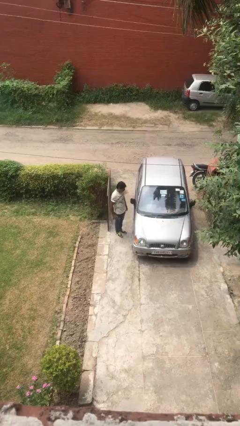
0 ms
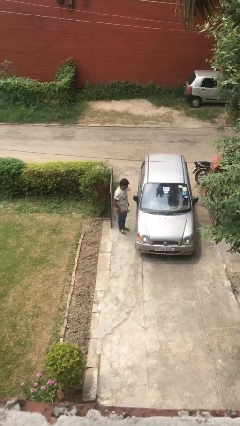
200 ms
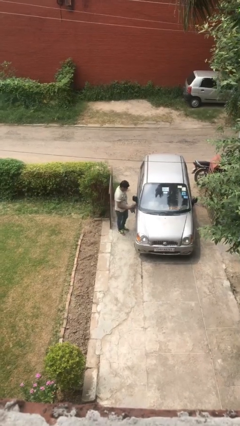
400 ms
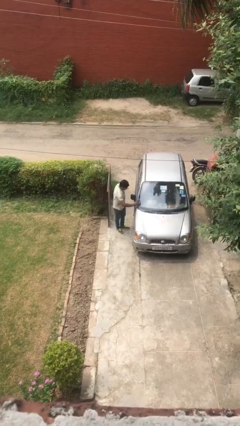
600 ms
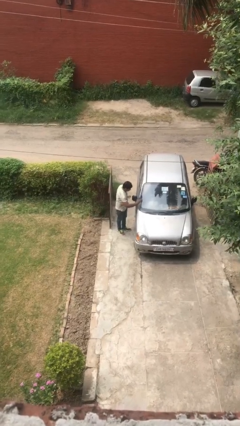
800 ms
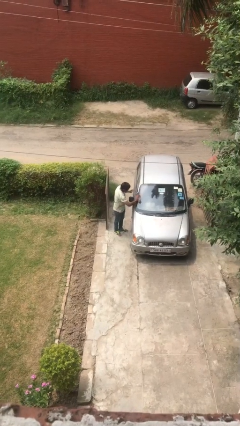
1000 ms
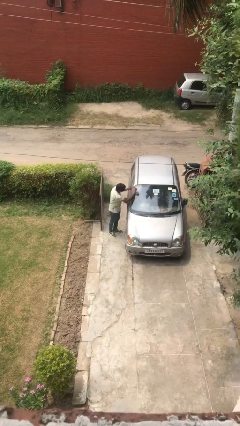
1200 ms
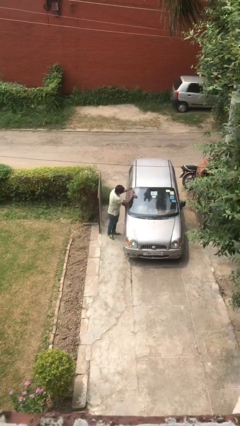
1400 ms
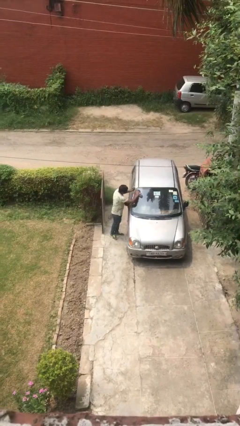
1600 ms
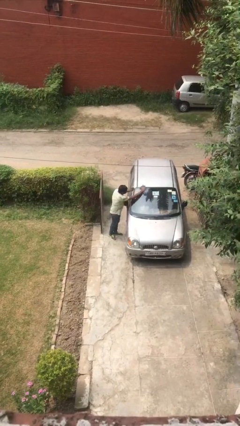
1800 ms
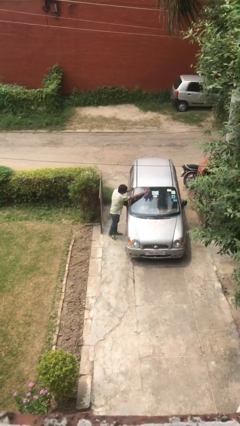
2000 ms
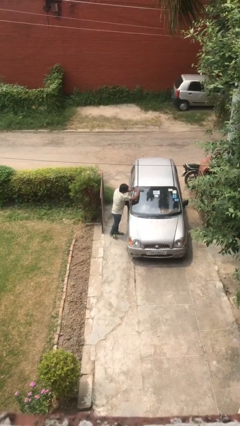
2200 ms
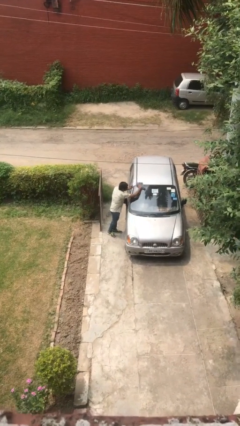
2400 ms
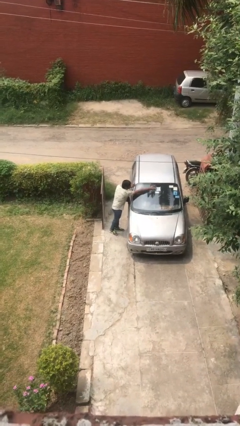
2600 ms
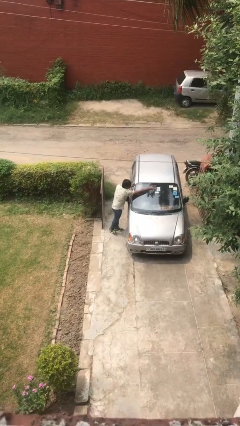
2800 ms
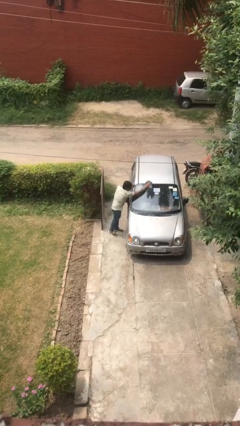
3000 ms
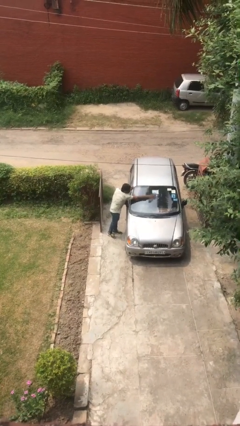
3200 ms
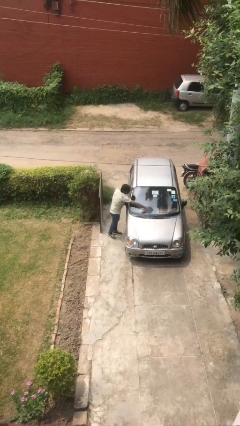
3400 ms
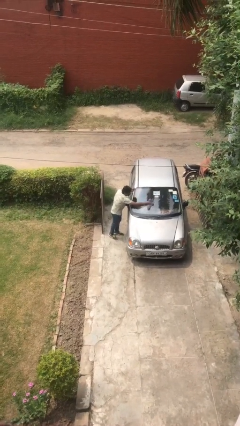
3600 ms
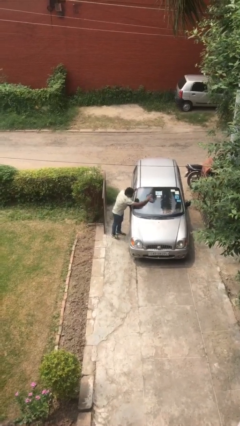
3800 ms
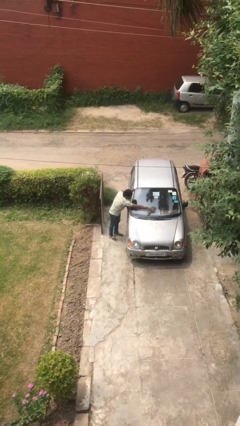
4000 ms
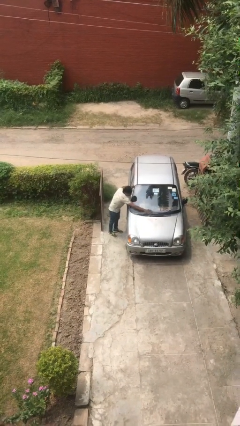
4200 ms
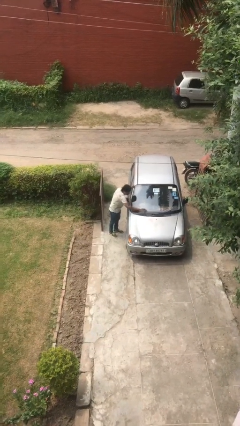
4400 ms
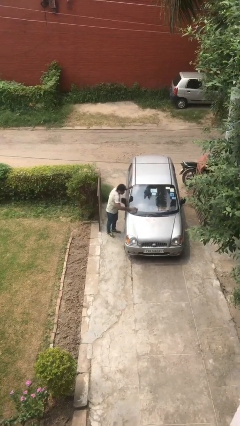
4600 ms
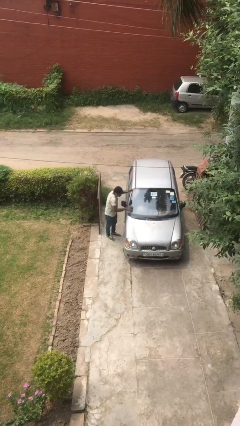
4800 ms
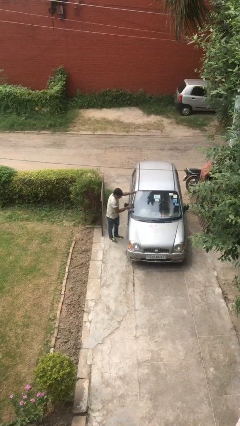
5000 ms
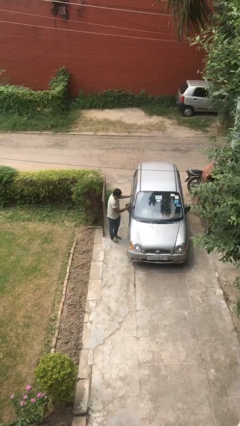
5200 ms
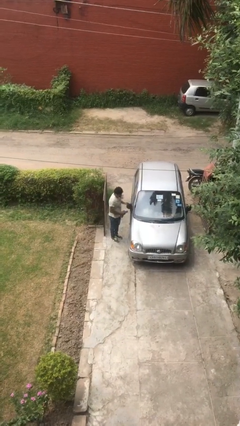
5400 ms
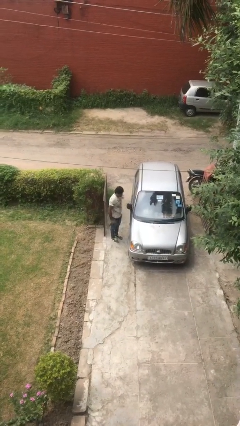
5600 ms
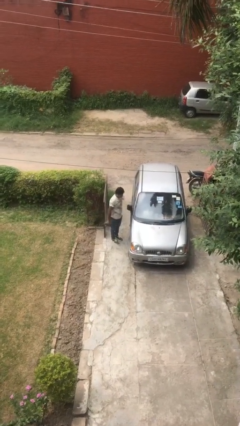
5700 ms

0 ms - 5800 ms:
person polishes car with rag

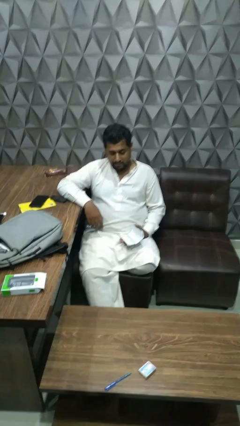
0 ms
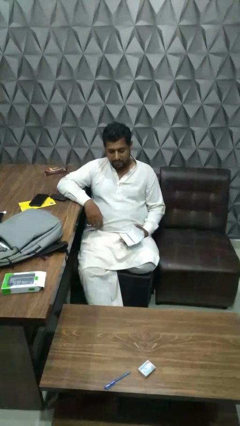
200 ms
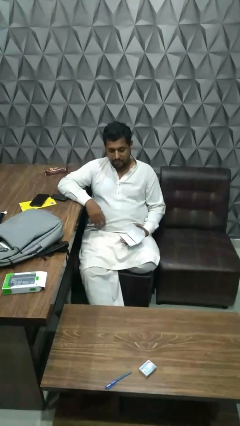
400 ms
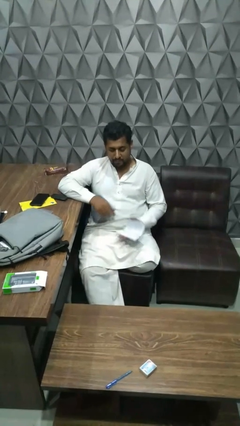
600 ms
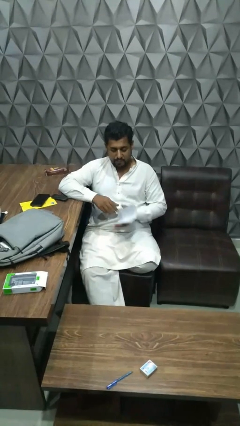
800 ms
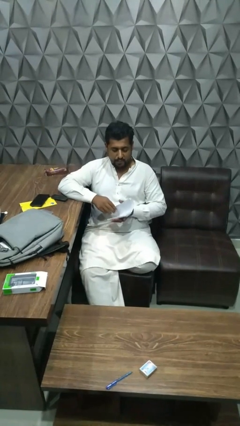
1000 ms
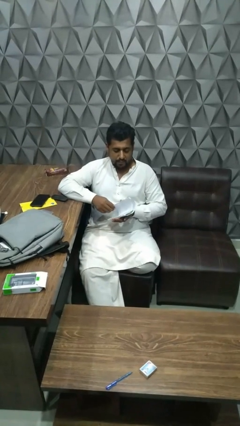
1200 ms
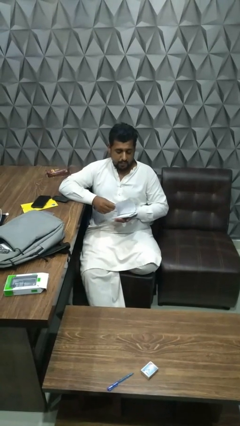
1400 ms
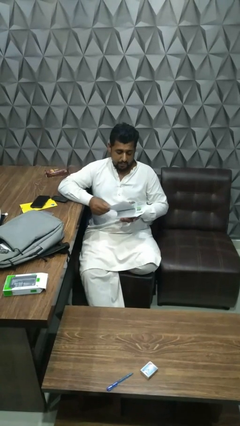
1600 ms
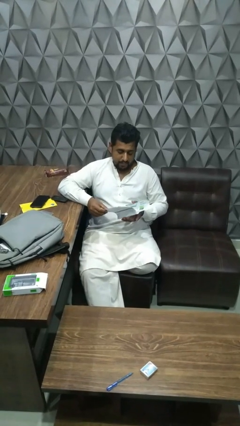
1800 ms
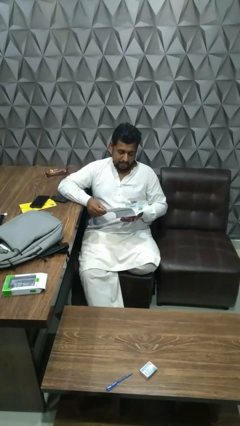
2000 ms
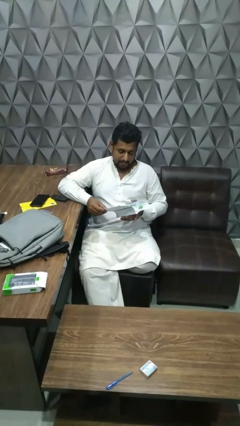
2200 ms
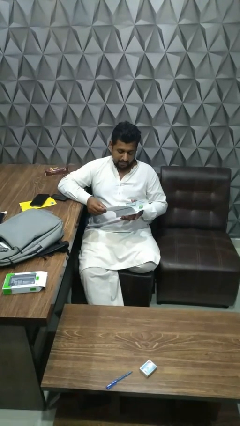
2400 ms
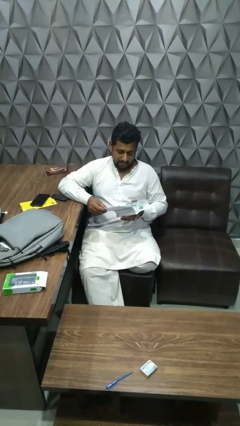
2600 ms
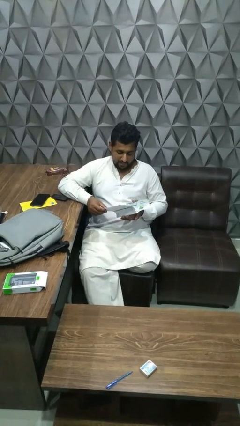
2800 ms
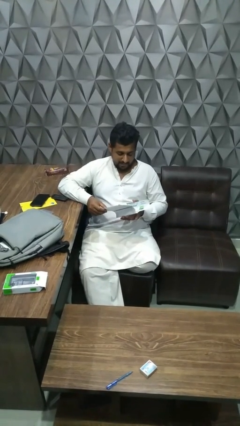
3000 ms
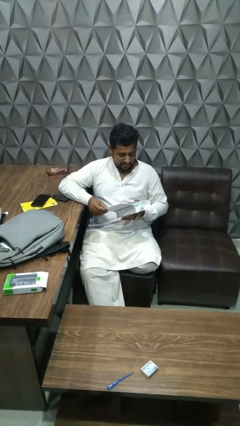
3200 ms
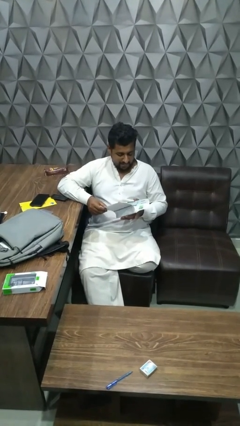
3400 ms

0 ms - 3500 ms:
person reads magazine

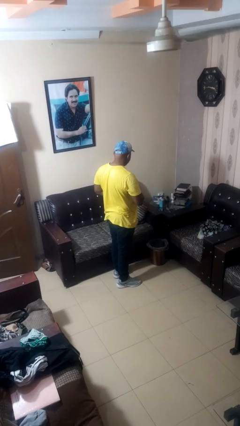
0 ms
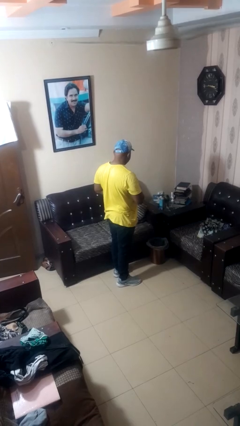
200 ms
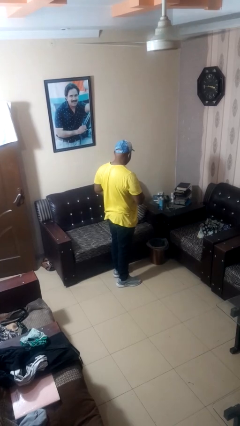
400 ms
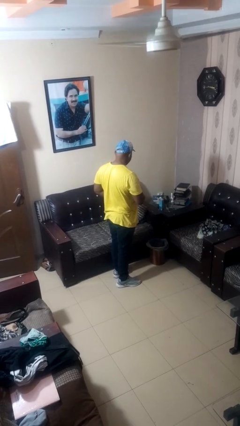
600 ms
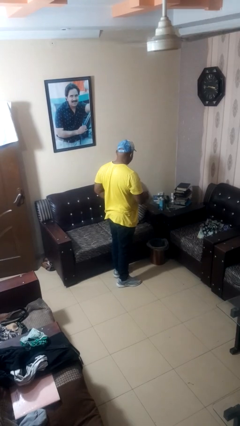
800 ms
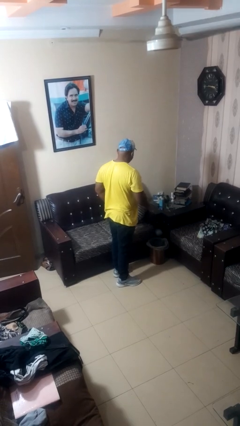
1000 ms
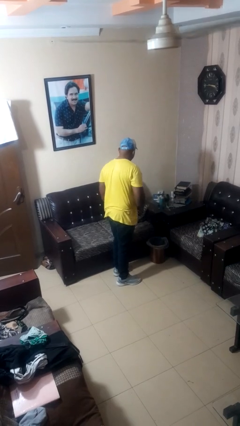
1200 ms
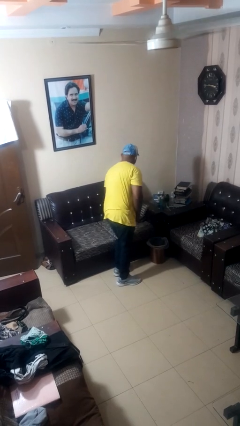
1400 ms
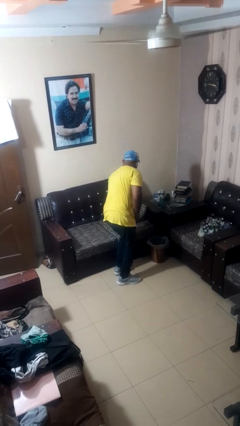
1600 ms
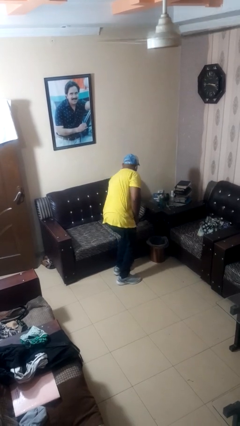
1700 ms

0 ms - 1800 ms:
person discards trash

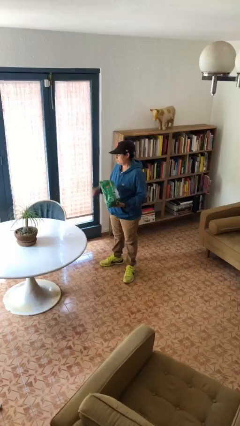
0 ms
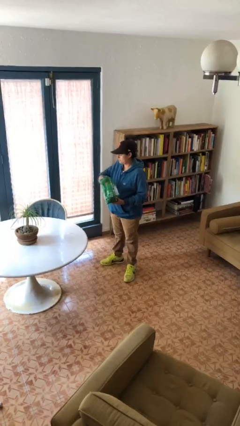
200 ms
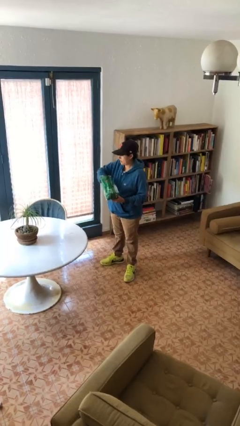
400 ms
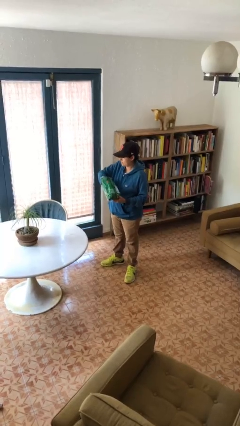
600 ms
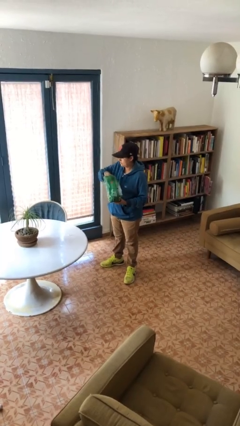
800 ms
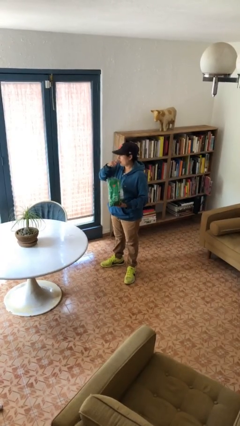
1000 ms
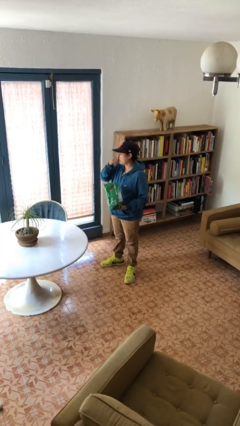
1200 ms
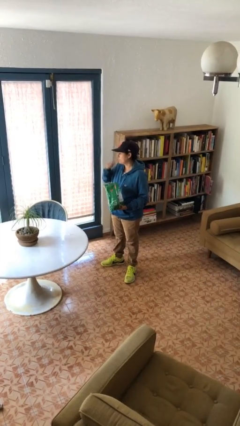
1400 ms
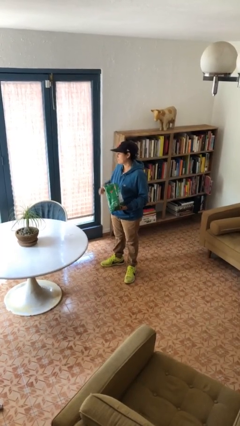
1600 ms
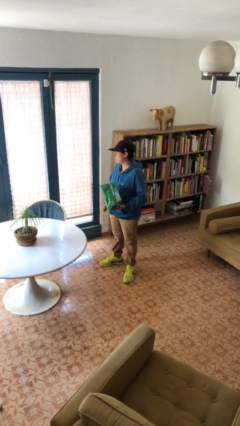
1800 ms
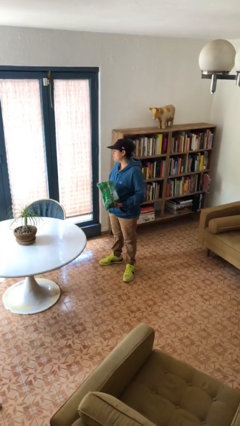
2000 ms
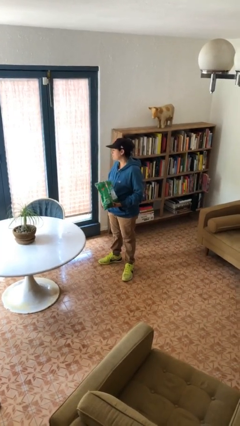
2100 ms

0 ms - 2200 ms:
person eats snack from bag

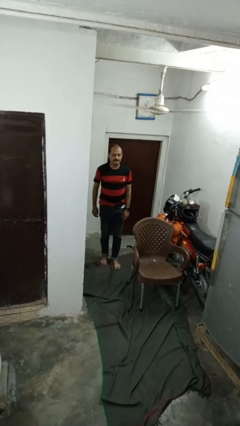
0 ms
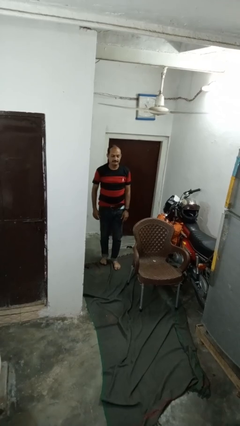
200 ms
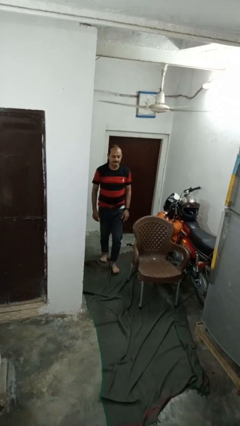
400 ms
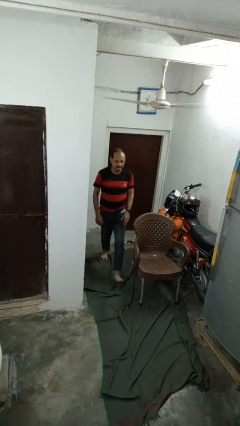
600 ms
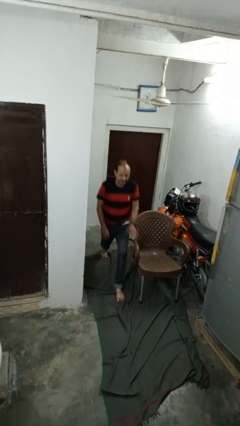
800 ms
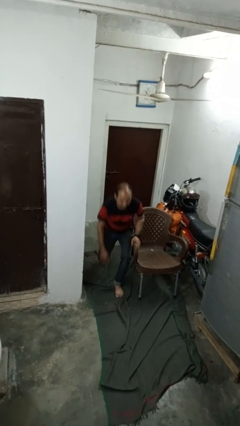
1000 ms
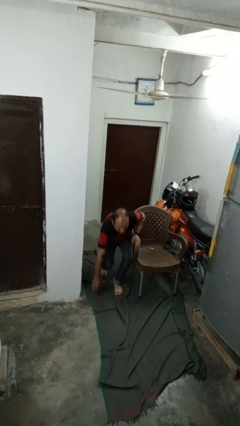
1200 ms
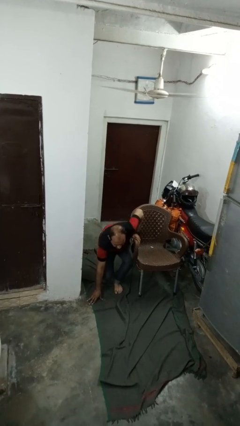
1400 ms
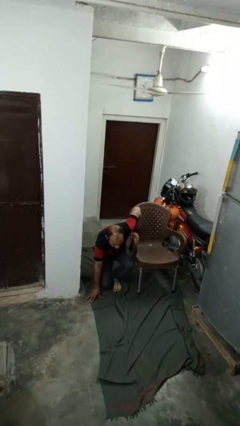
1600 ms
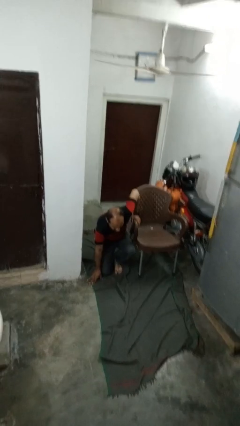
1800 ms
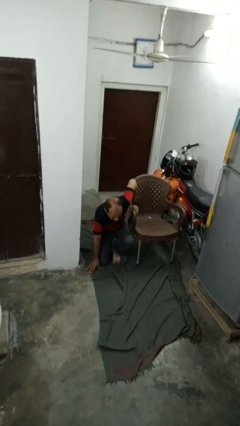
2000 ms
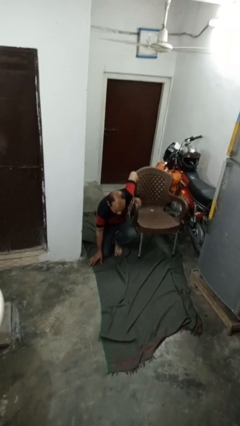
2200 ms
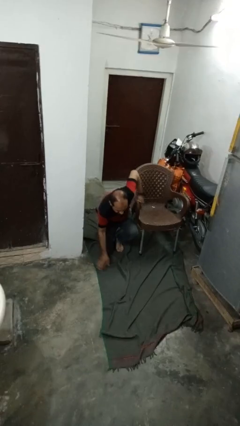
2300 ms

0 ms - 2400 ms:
person trips on object on floor

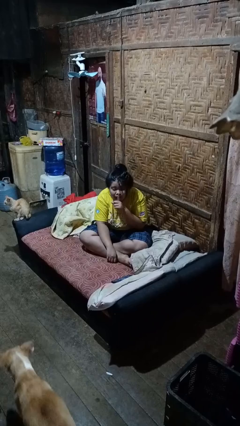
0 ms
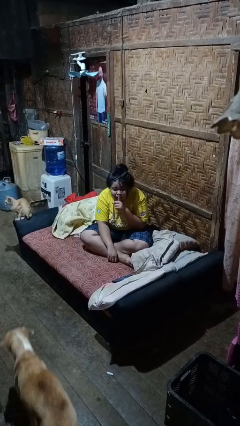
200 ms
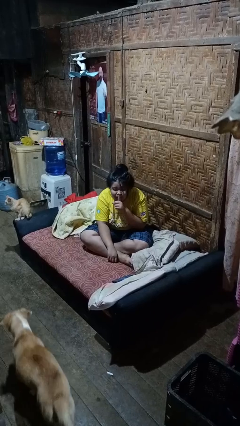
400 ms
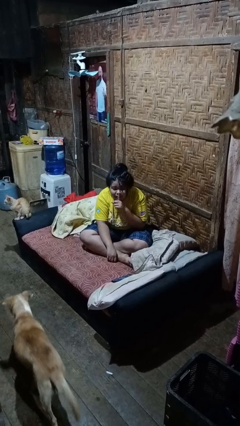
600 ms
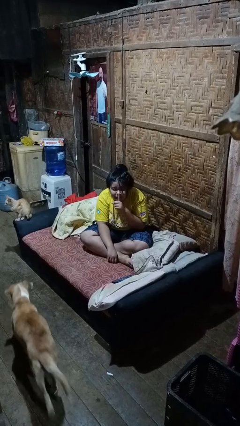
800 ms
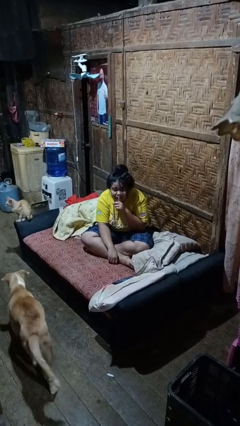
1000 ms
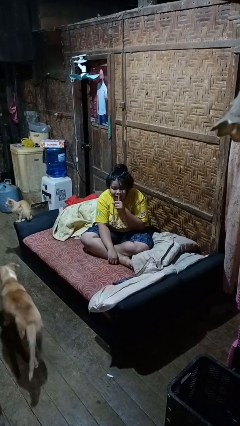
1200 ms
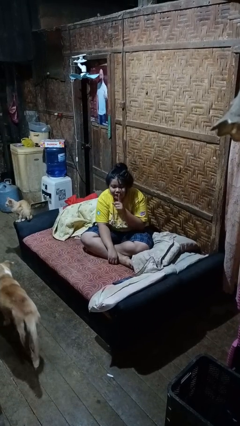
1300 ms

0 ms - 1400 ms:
person gestures be quiet

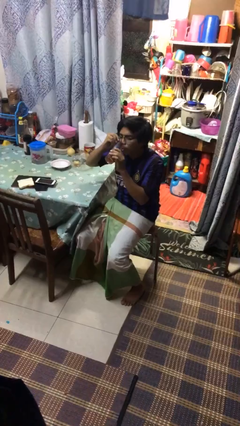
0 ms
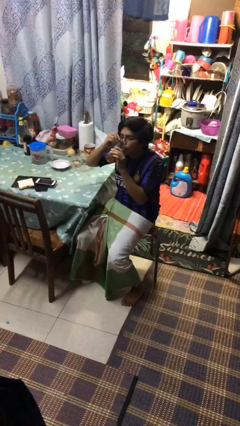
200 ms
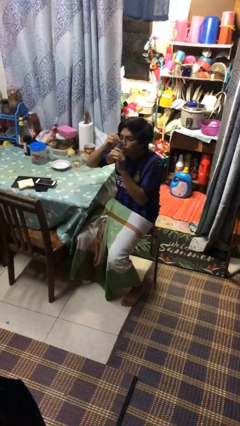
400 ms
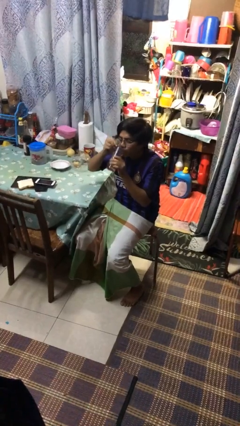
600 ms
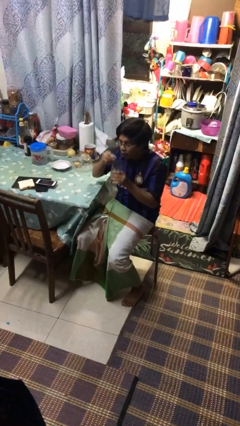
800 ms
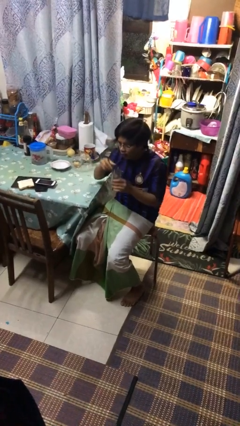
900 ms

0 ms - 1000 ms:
person drinks from mug
